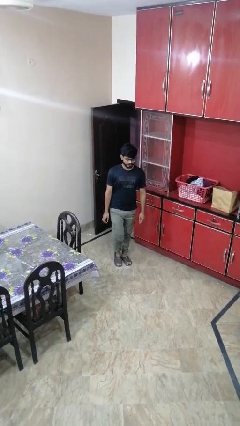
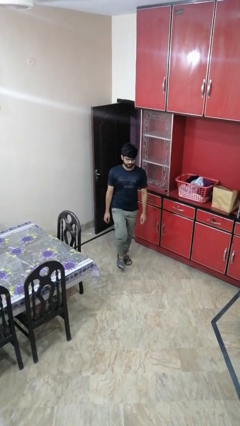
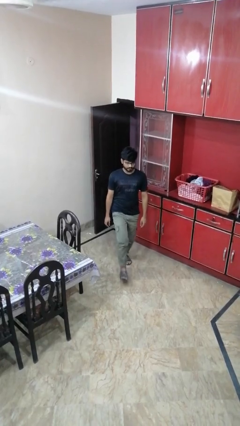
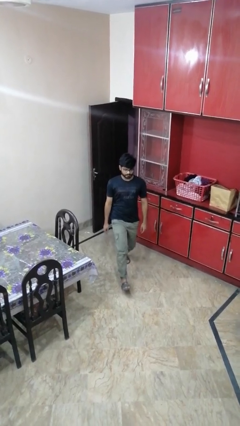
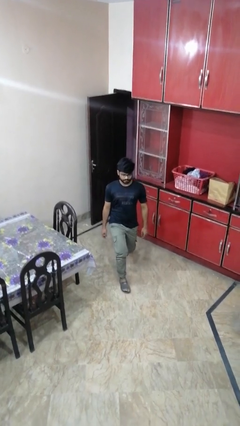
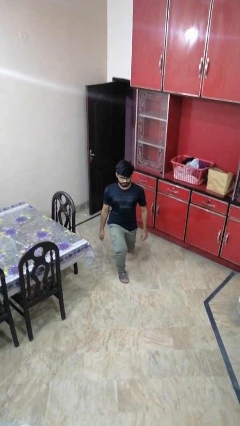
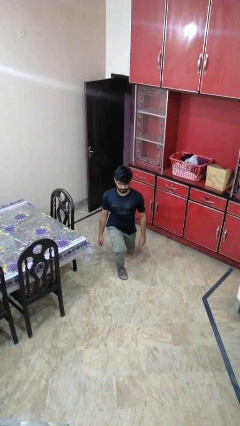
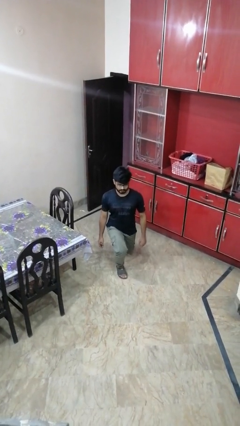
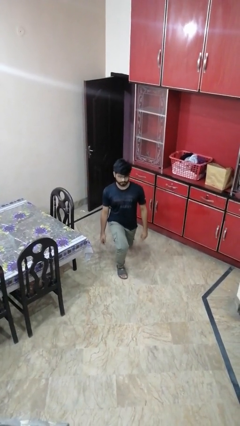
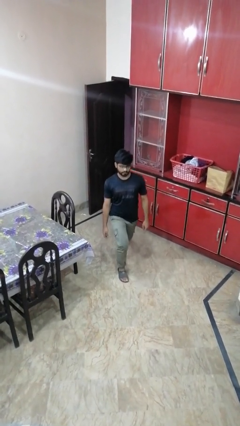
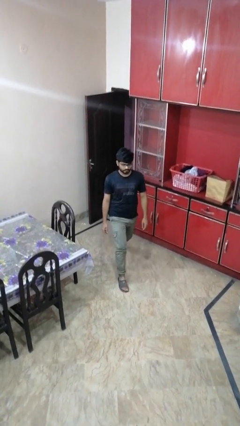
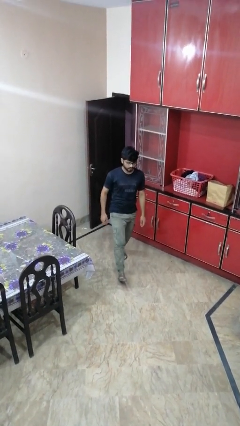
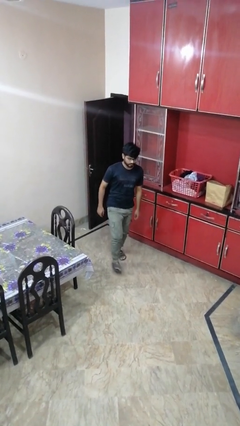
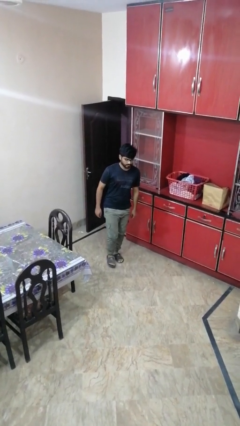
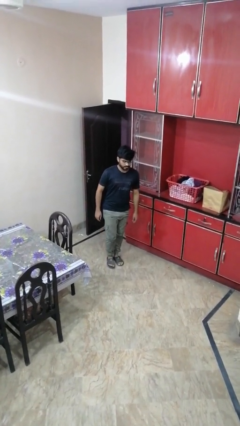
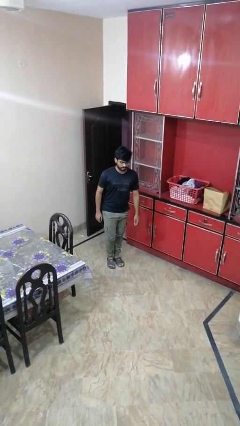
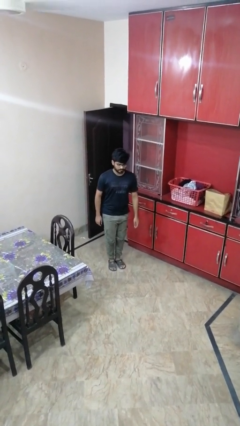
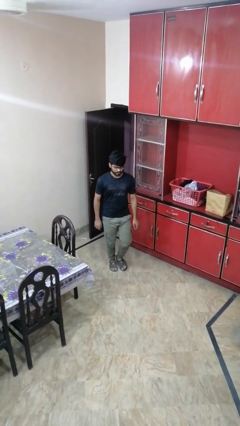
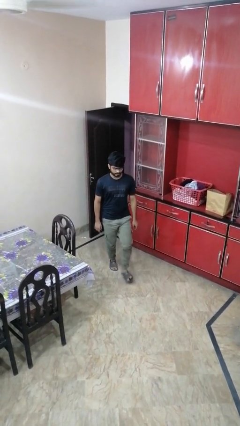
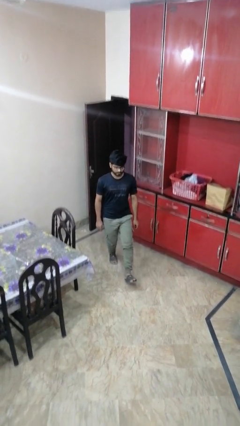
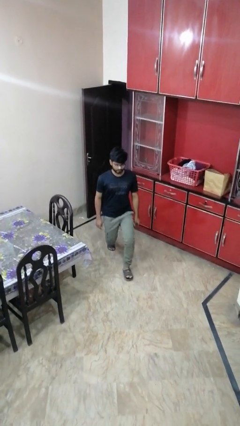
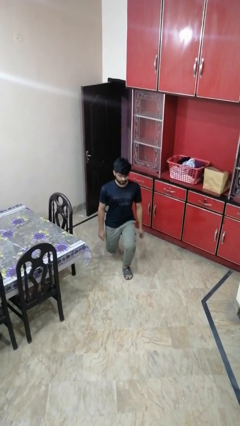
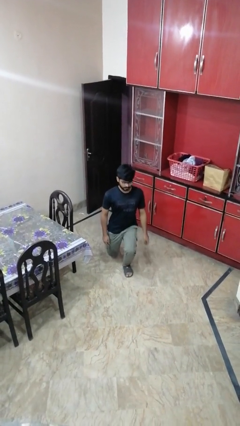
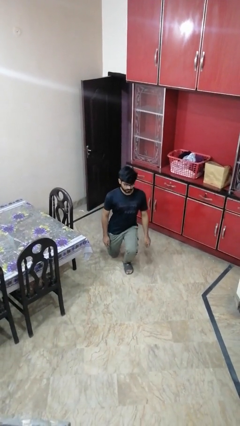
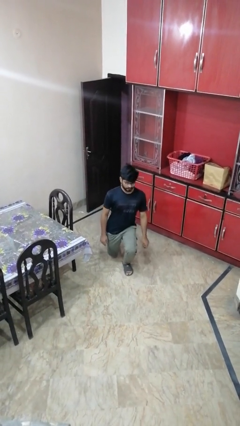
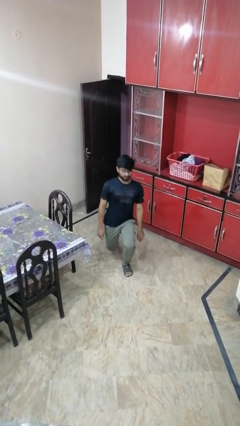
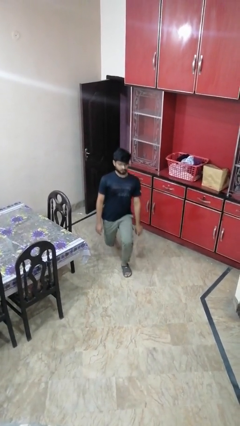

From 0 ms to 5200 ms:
person exercises with lunges

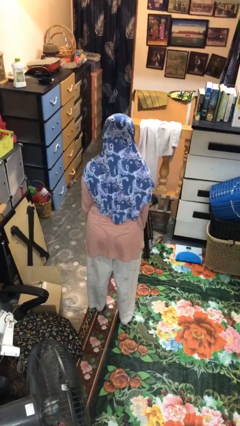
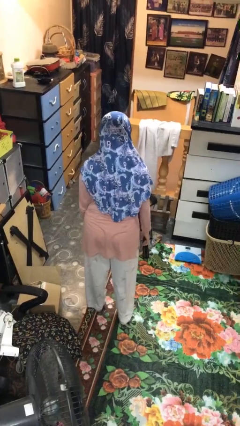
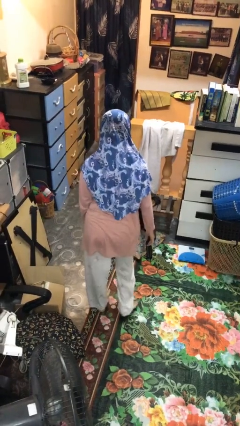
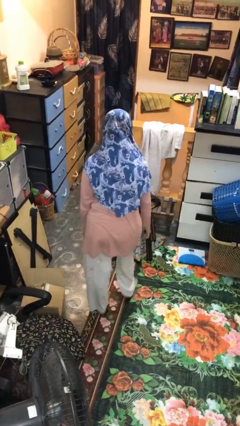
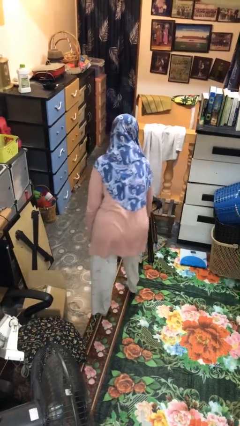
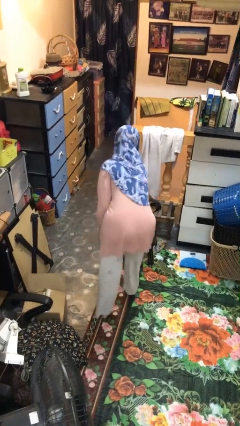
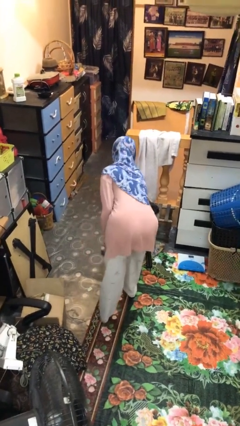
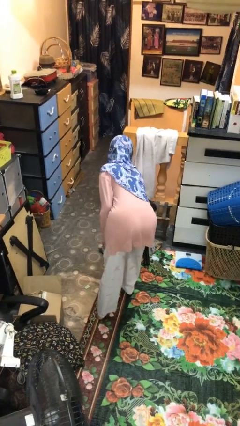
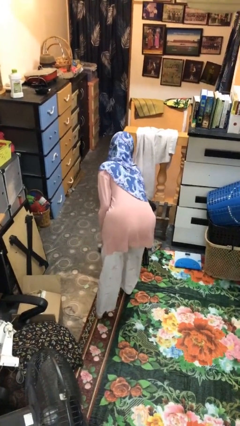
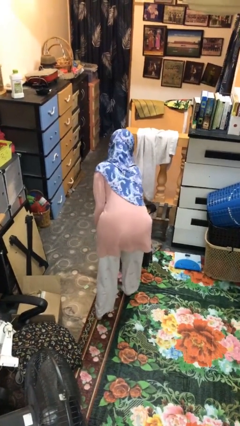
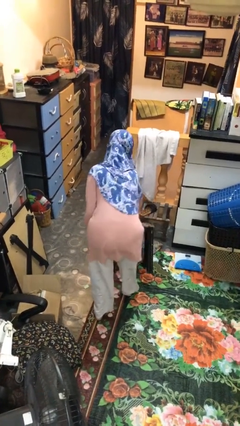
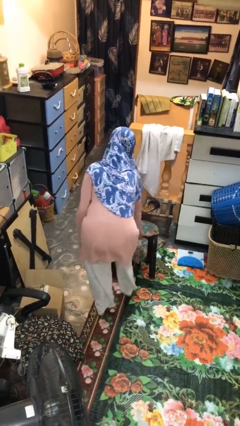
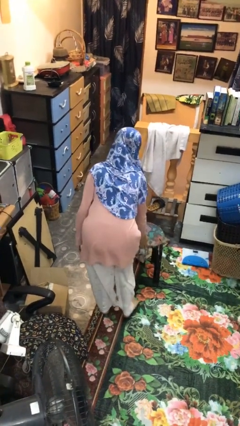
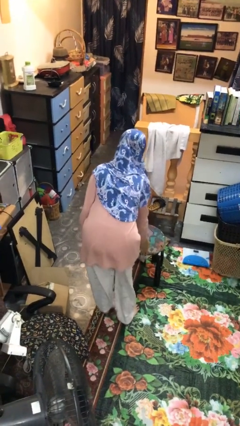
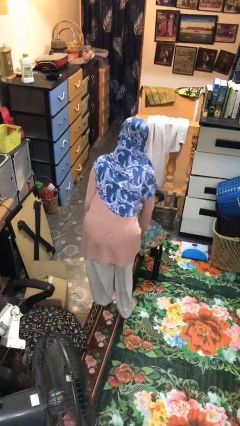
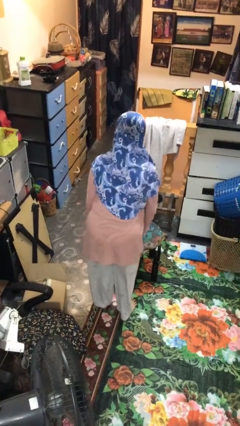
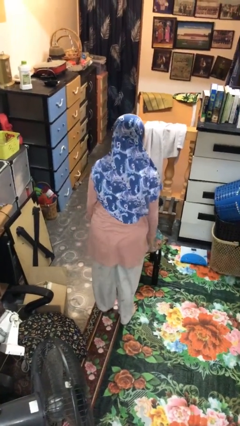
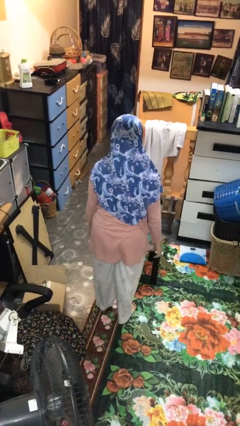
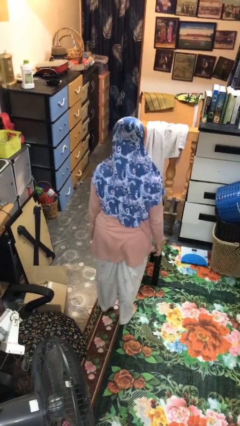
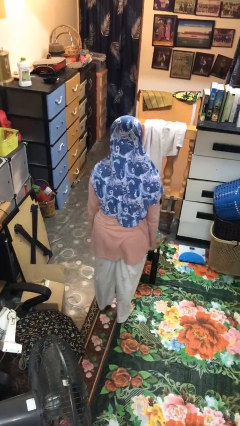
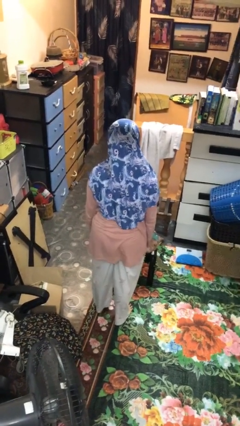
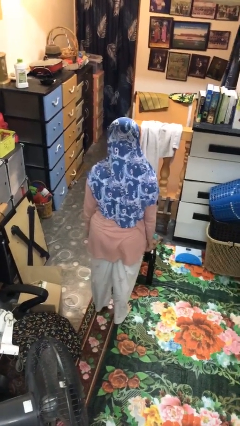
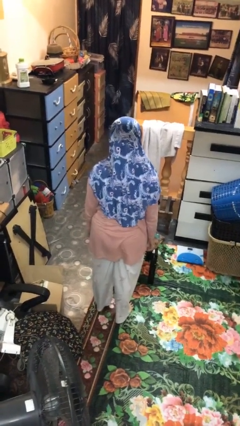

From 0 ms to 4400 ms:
person sets upright furniture

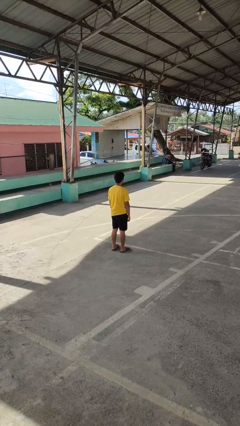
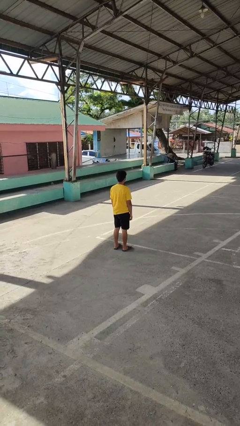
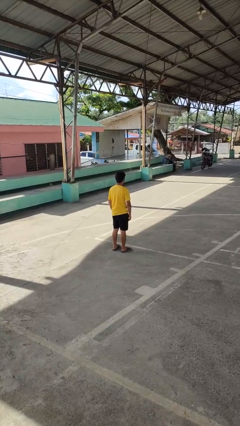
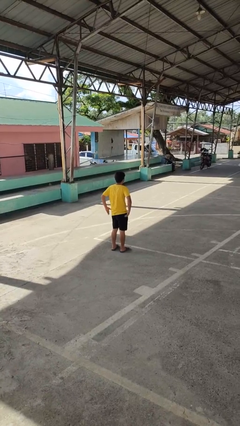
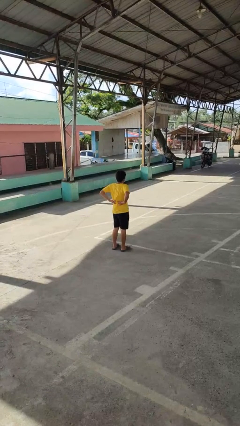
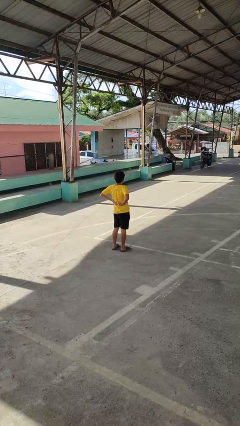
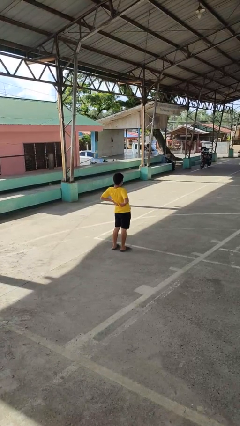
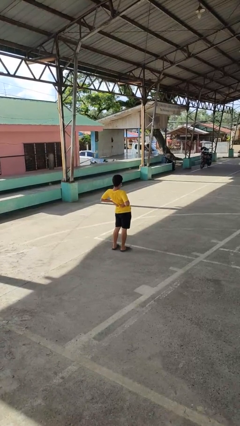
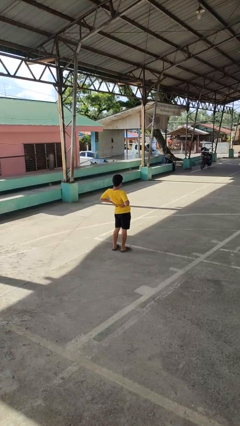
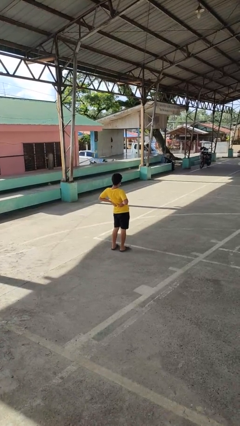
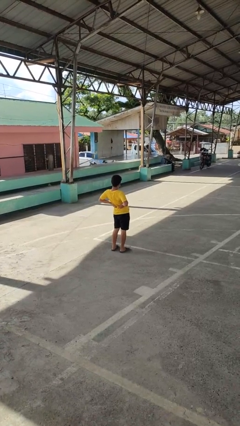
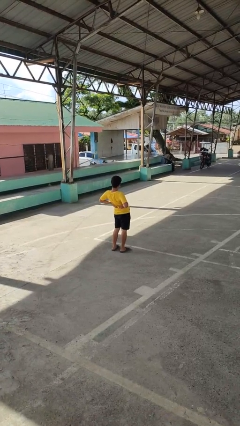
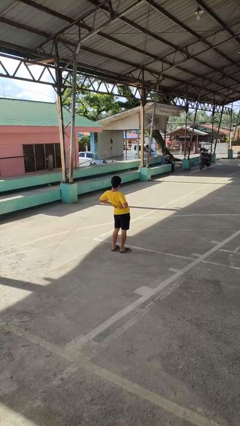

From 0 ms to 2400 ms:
person stretches back

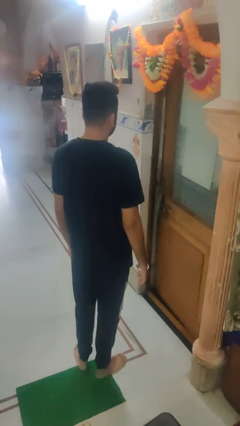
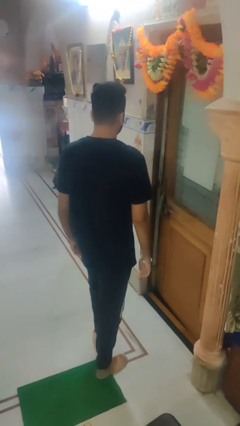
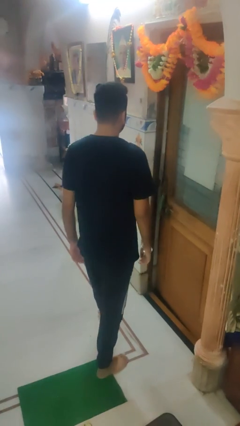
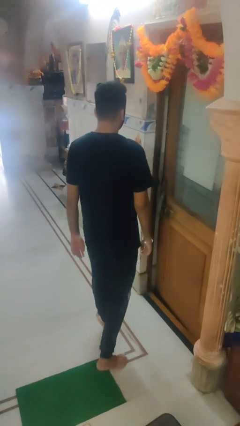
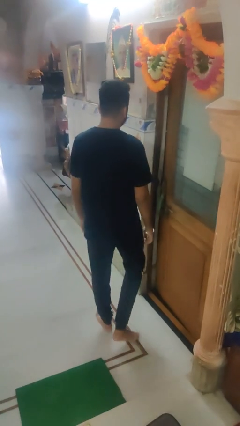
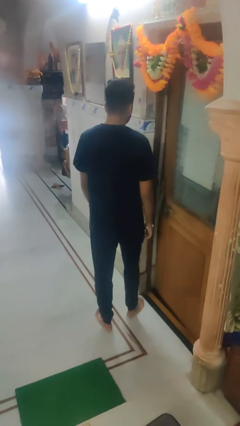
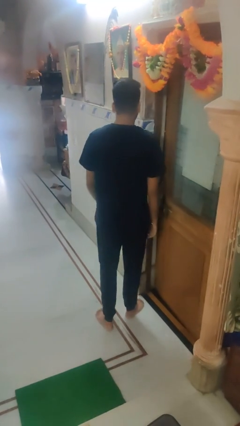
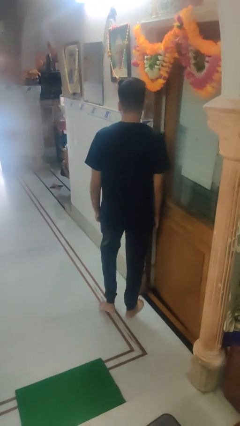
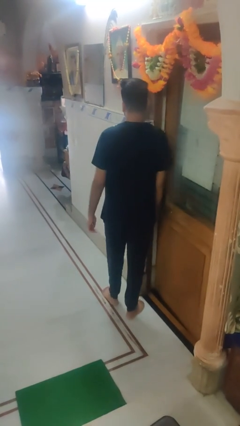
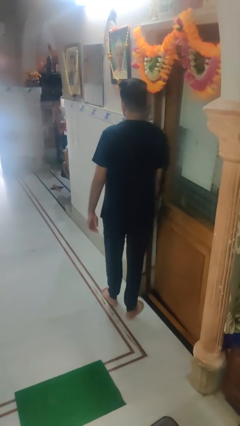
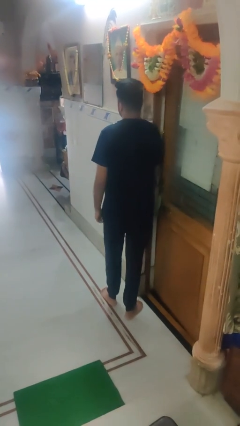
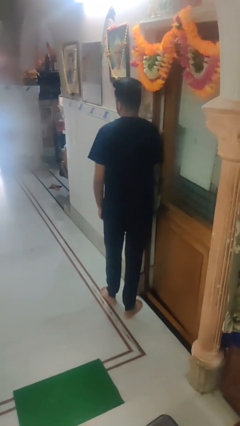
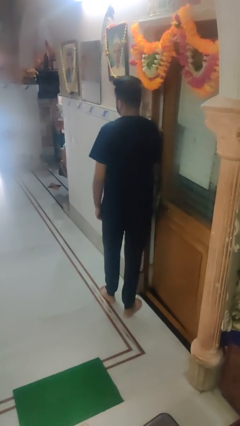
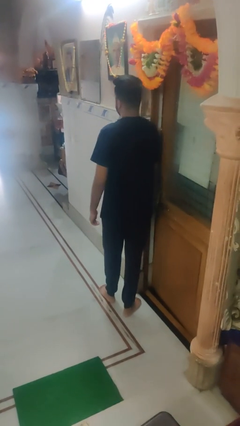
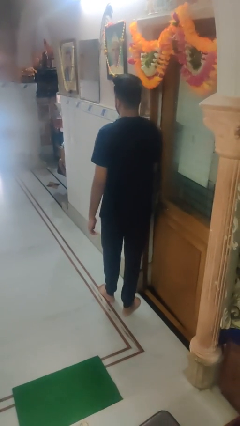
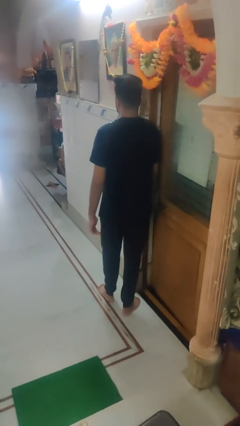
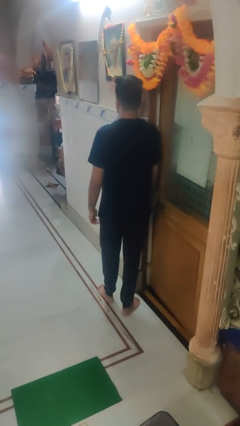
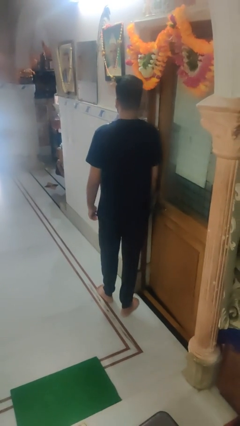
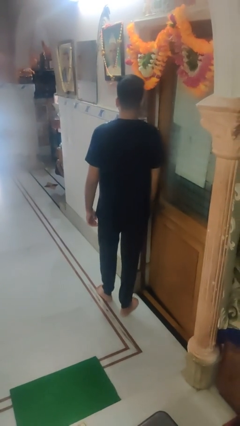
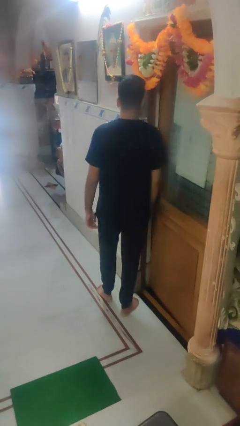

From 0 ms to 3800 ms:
person bumps into wall

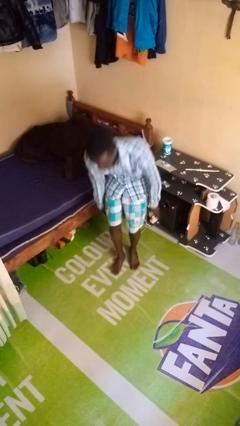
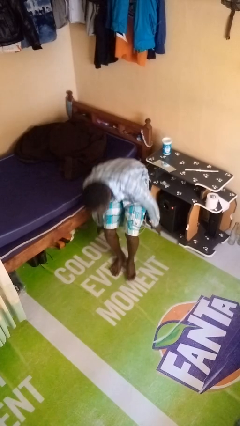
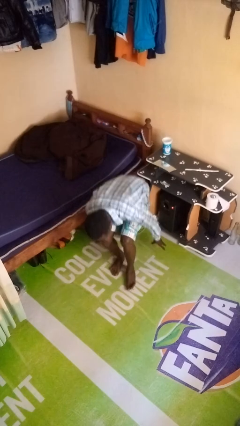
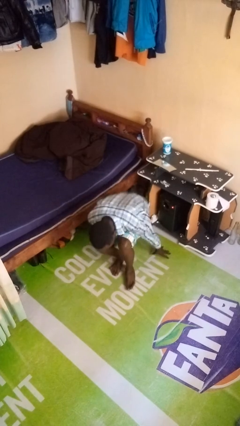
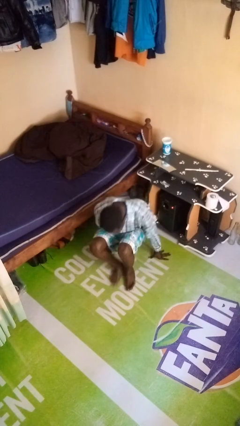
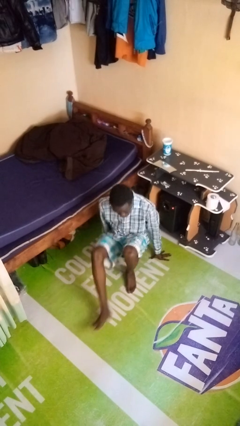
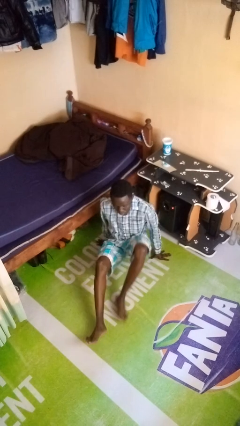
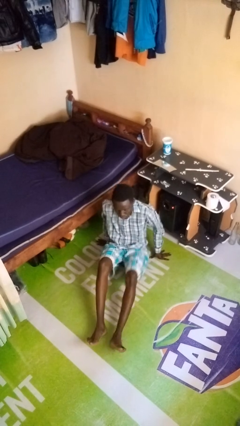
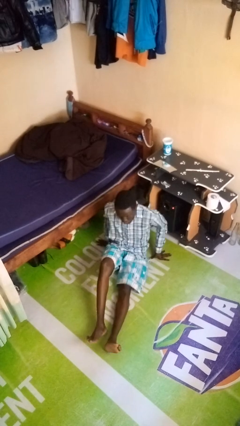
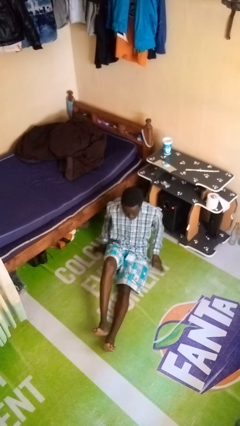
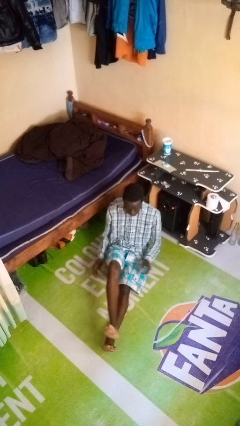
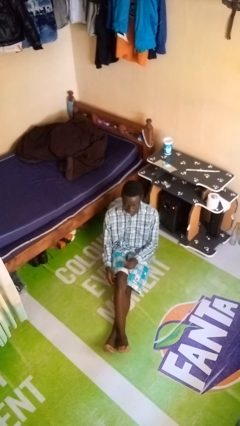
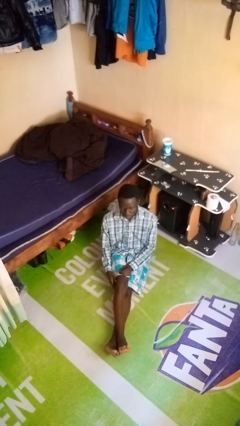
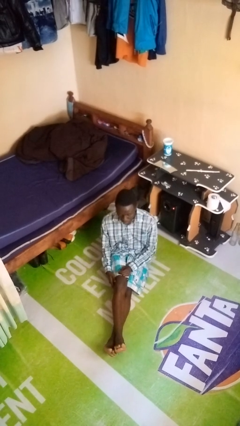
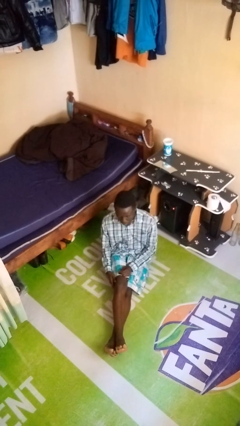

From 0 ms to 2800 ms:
person sits crisscross
